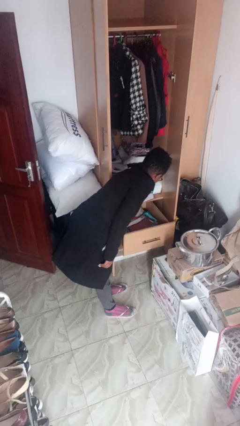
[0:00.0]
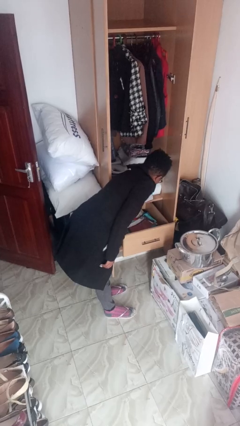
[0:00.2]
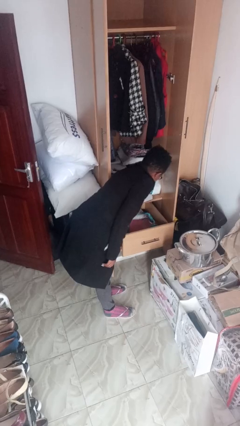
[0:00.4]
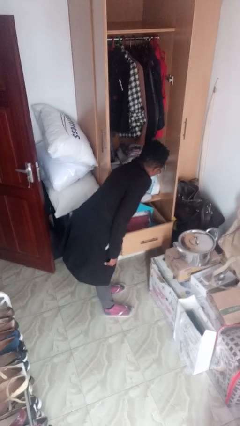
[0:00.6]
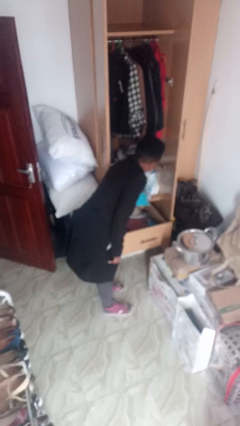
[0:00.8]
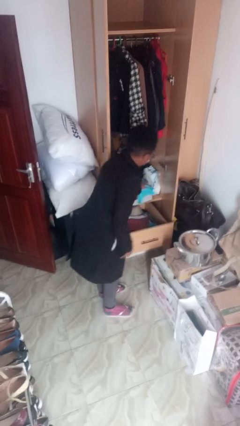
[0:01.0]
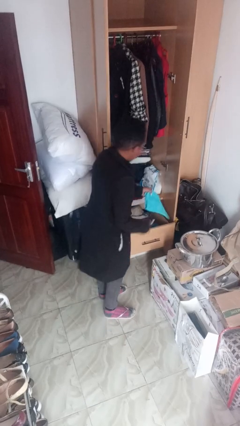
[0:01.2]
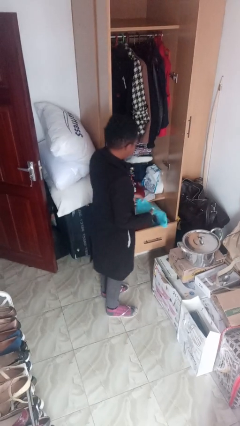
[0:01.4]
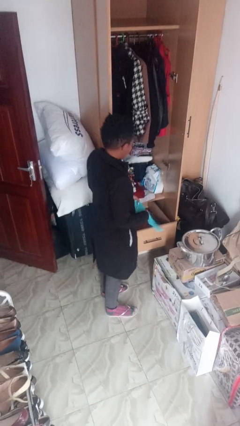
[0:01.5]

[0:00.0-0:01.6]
person takes clothes from dresser

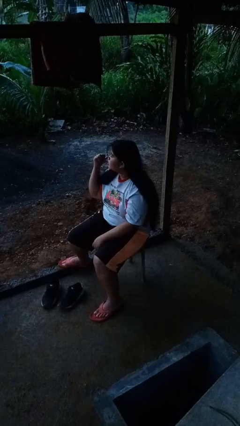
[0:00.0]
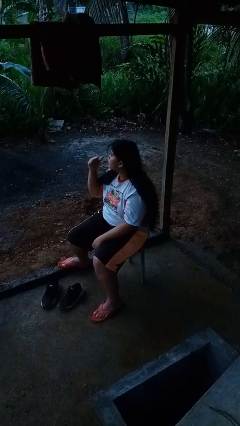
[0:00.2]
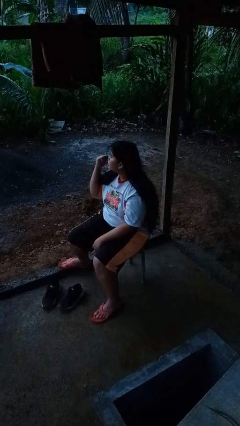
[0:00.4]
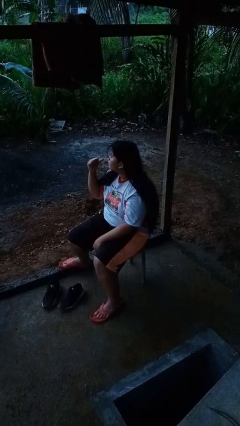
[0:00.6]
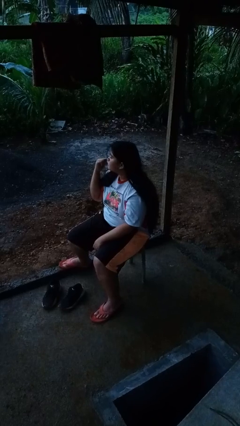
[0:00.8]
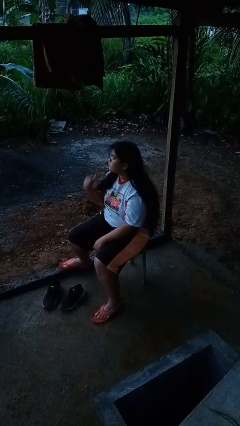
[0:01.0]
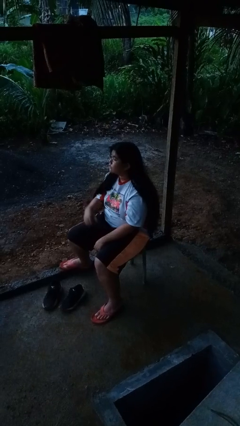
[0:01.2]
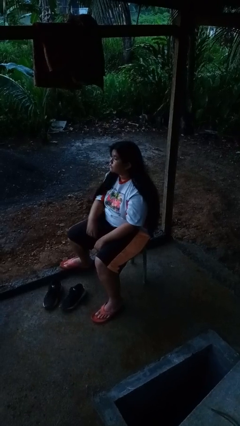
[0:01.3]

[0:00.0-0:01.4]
person gestures behind me

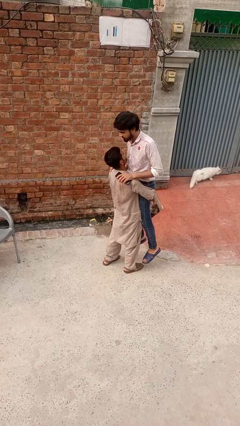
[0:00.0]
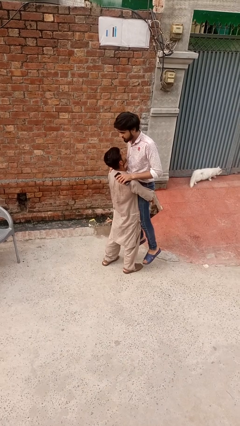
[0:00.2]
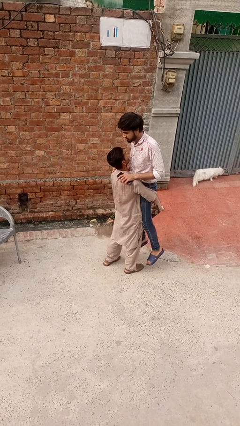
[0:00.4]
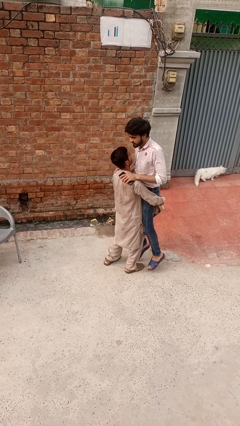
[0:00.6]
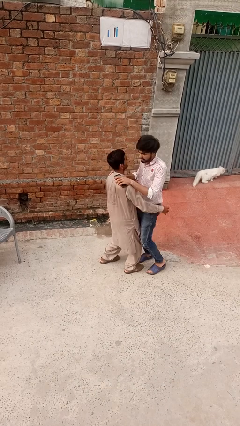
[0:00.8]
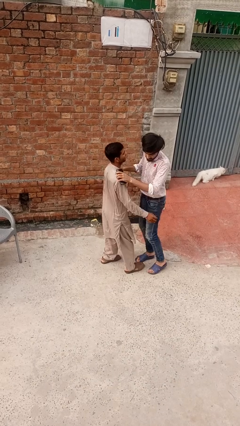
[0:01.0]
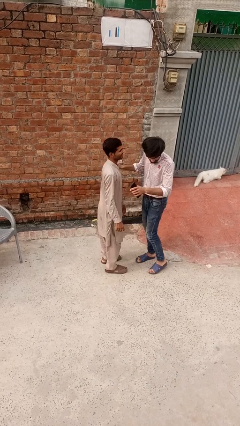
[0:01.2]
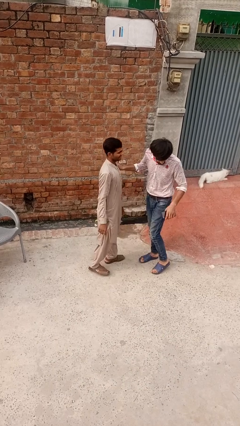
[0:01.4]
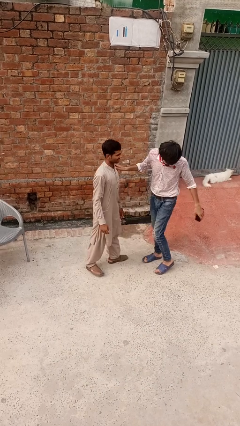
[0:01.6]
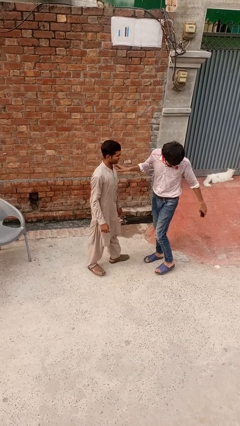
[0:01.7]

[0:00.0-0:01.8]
person puts down person

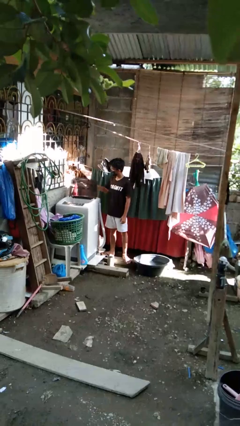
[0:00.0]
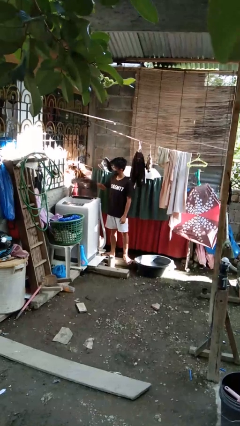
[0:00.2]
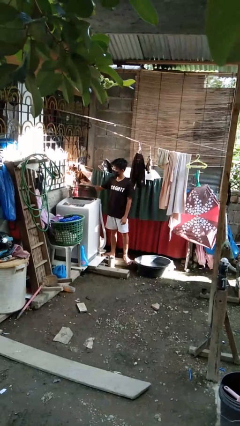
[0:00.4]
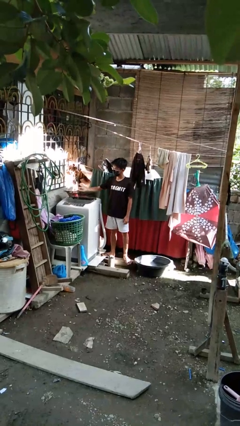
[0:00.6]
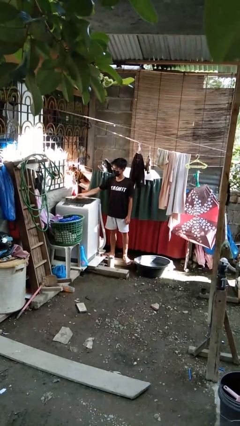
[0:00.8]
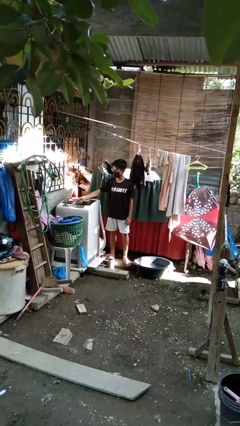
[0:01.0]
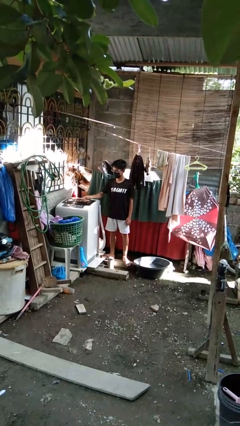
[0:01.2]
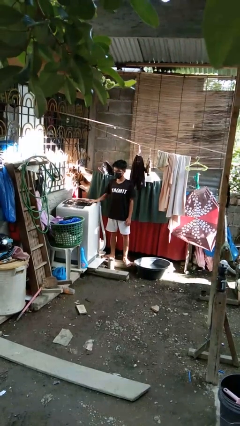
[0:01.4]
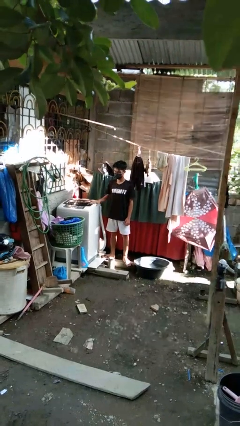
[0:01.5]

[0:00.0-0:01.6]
person closes clothes washer

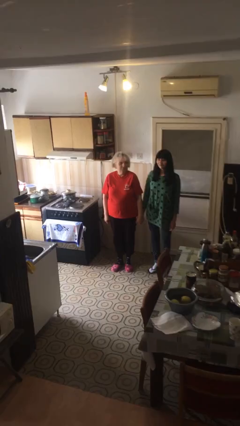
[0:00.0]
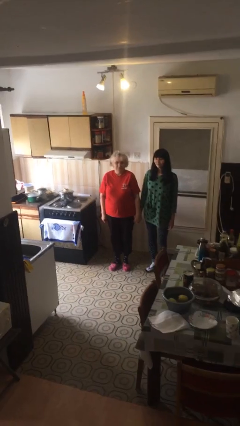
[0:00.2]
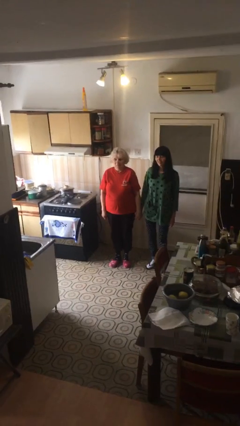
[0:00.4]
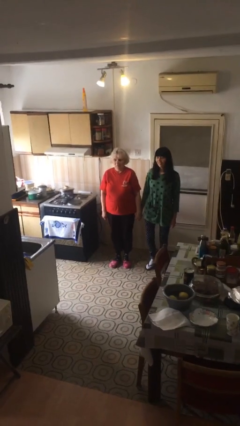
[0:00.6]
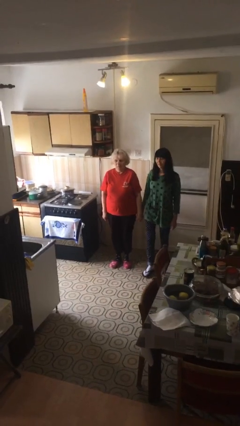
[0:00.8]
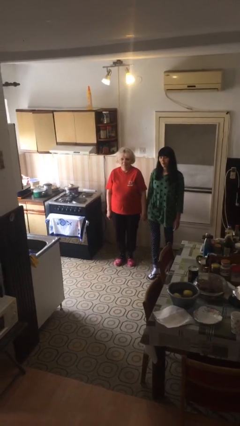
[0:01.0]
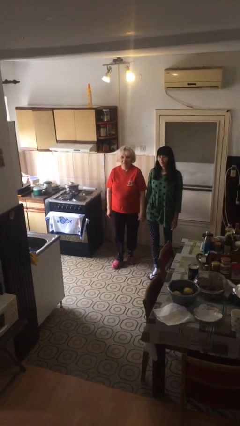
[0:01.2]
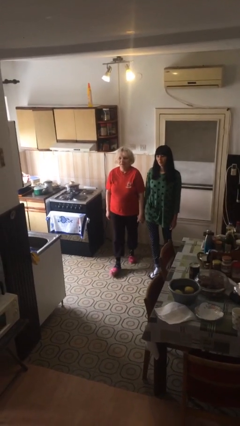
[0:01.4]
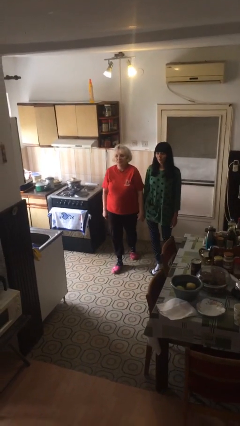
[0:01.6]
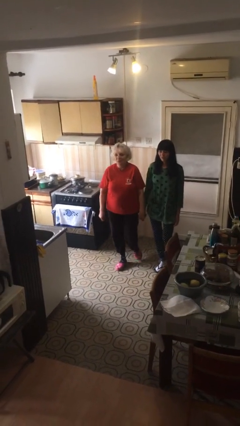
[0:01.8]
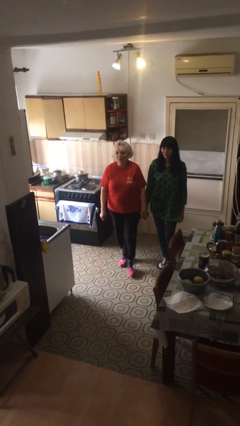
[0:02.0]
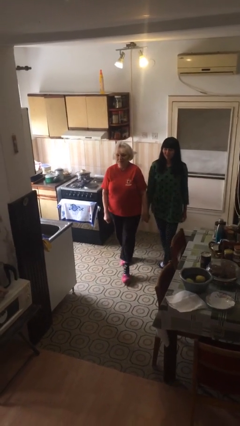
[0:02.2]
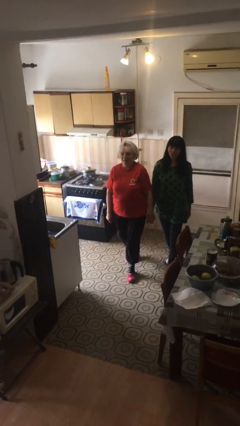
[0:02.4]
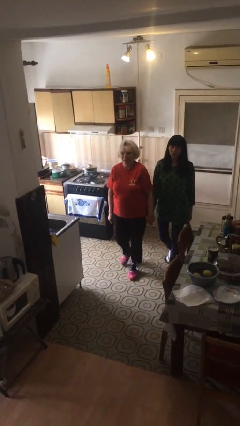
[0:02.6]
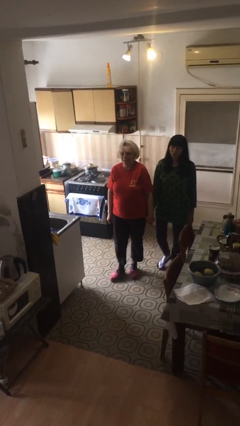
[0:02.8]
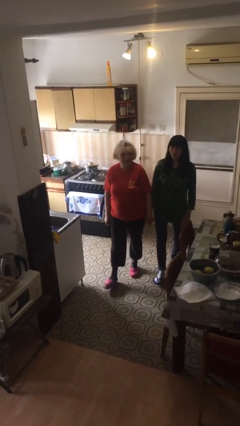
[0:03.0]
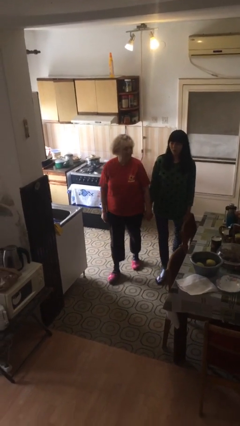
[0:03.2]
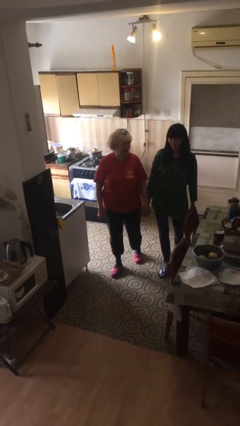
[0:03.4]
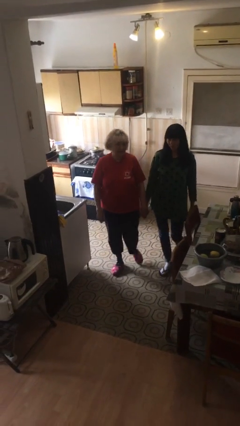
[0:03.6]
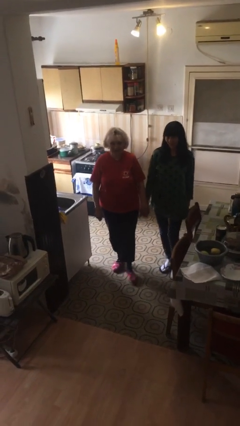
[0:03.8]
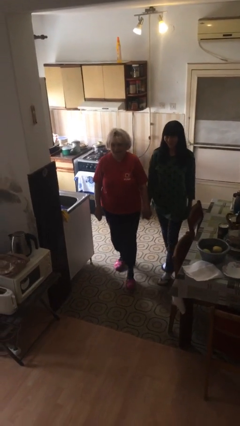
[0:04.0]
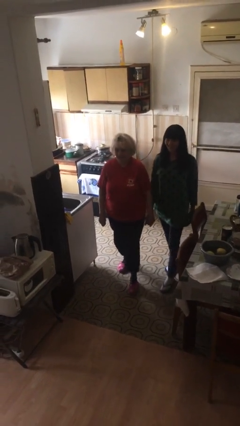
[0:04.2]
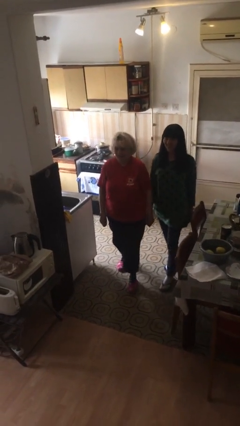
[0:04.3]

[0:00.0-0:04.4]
person holds hand

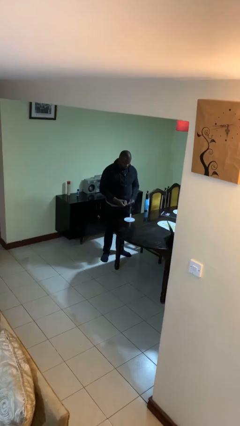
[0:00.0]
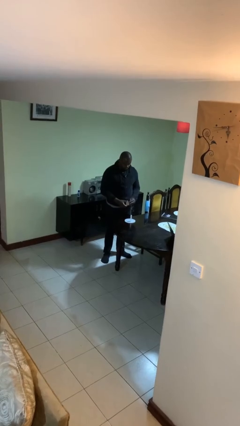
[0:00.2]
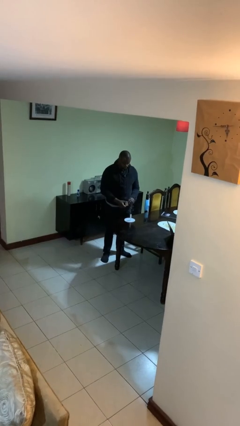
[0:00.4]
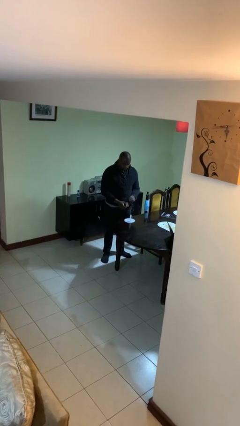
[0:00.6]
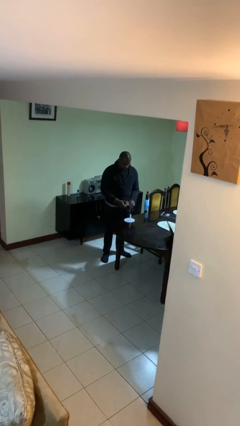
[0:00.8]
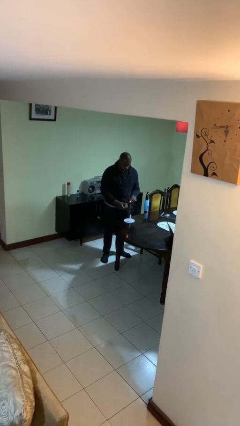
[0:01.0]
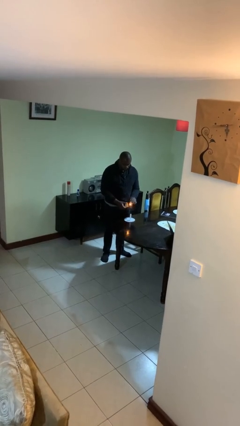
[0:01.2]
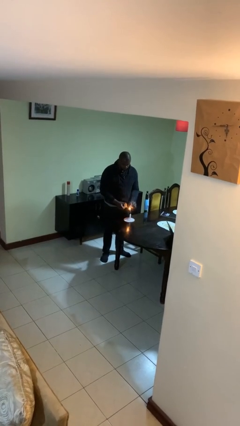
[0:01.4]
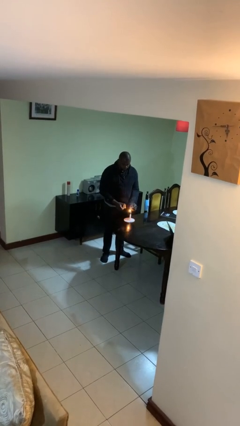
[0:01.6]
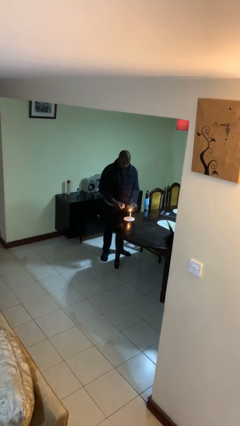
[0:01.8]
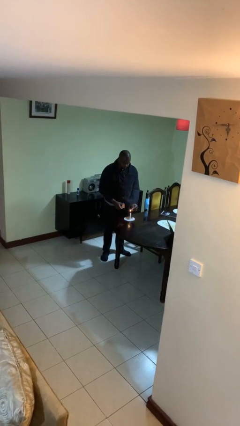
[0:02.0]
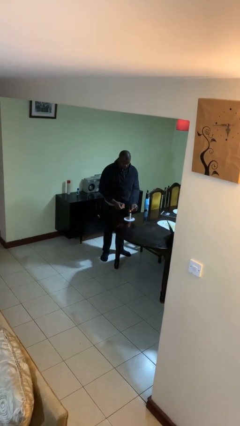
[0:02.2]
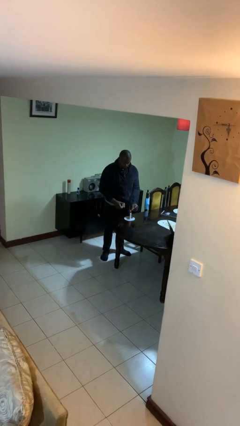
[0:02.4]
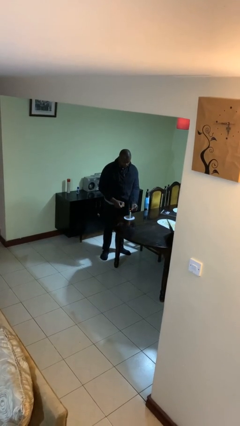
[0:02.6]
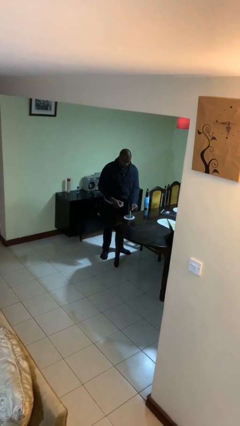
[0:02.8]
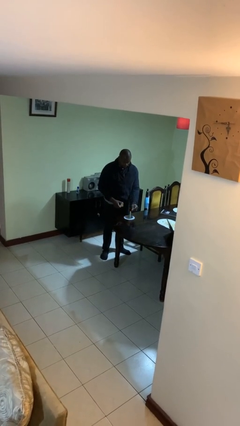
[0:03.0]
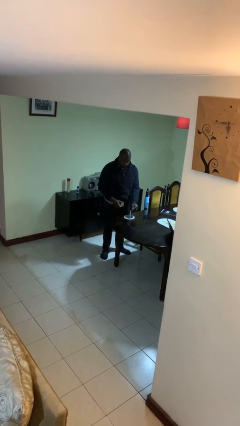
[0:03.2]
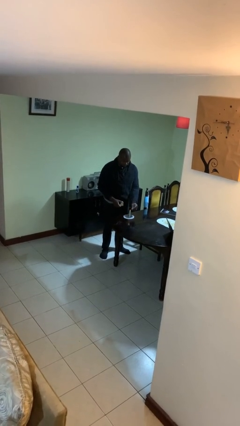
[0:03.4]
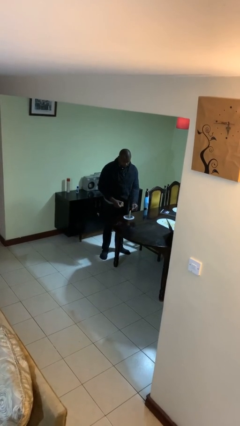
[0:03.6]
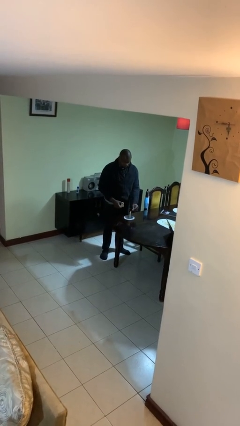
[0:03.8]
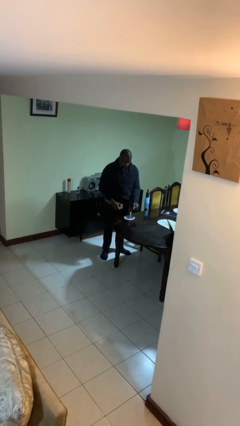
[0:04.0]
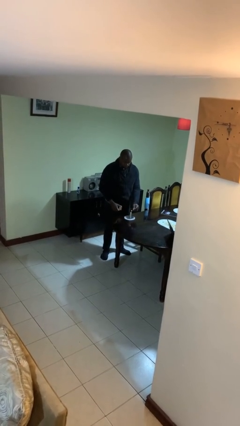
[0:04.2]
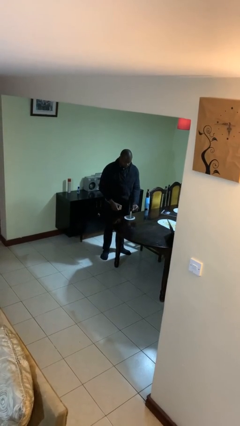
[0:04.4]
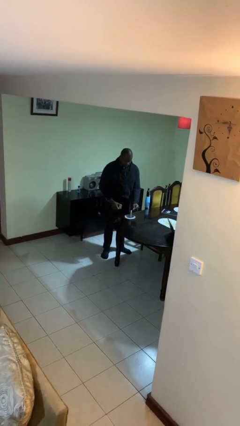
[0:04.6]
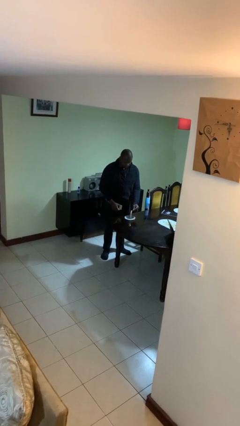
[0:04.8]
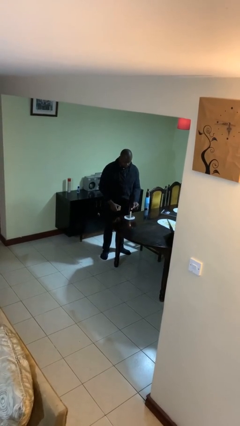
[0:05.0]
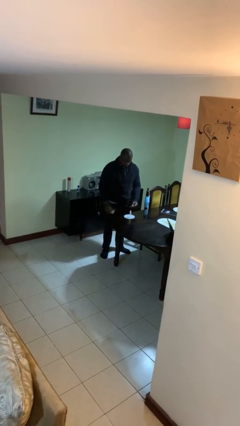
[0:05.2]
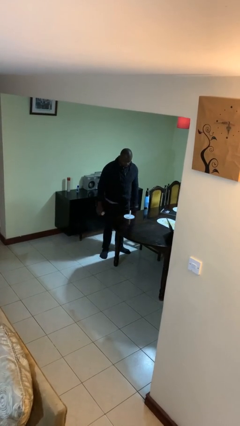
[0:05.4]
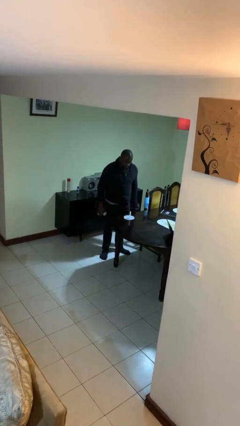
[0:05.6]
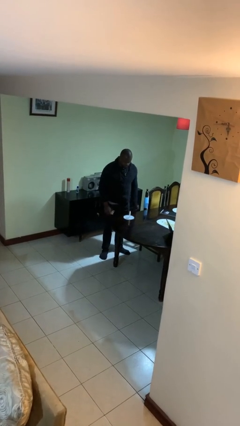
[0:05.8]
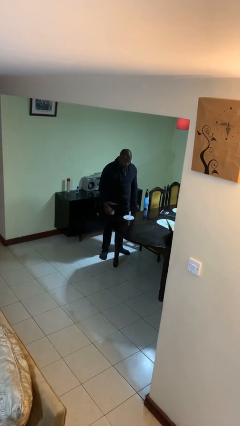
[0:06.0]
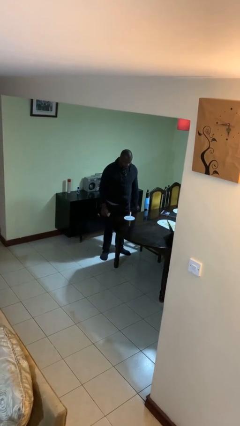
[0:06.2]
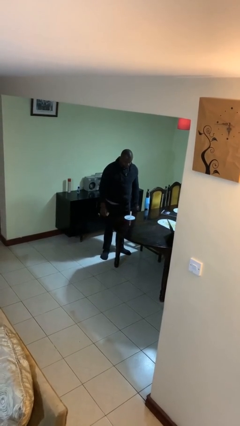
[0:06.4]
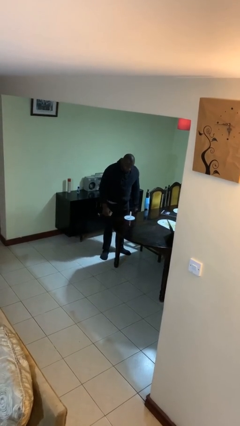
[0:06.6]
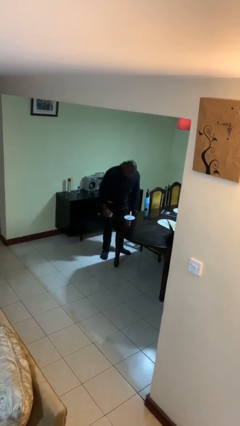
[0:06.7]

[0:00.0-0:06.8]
person lights candle
